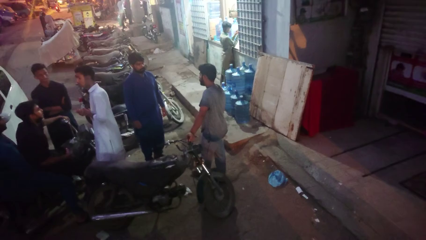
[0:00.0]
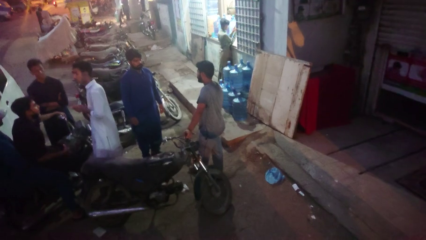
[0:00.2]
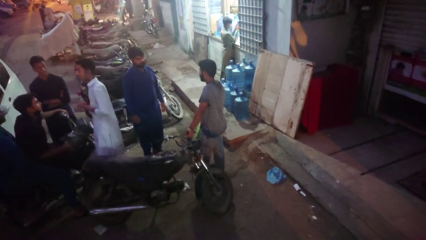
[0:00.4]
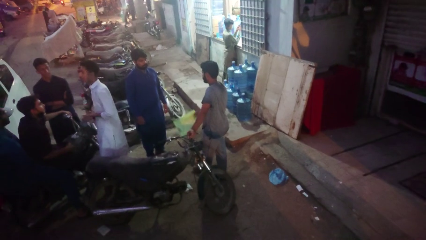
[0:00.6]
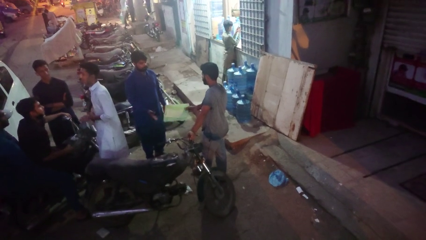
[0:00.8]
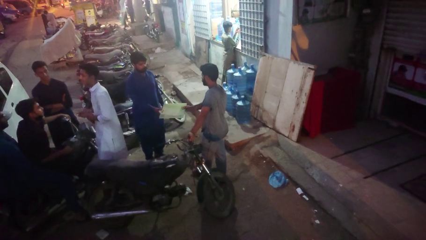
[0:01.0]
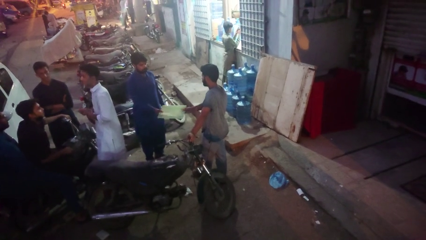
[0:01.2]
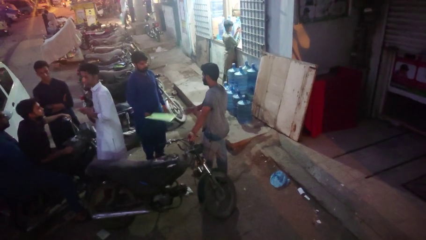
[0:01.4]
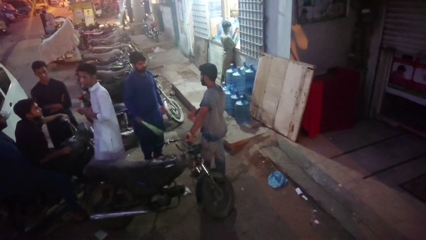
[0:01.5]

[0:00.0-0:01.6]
person transfers object to person

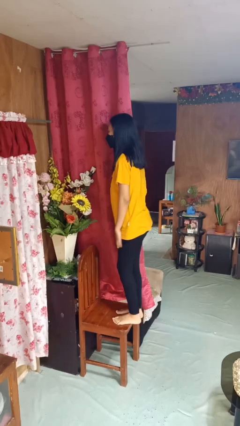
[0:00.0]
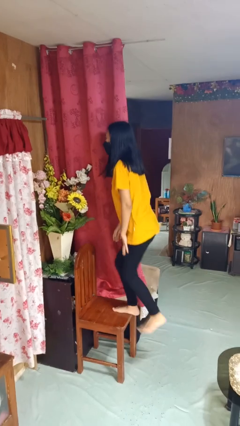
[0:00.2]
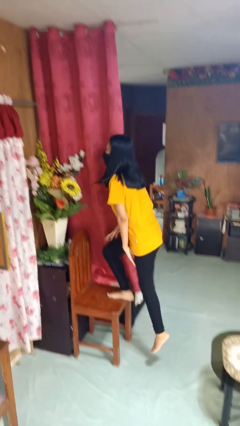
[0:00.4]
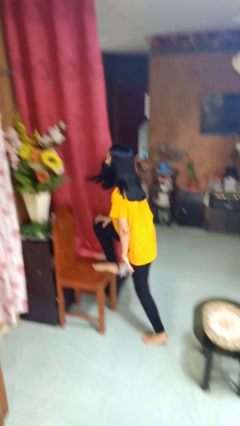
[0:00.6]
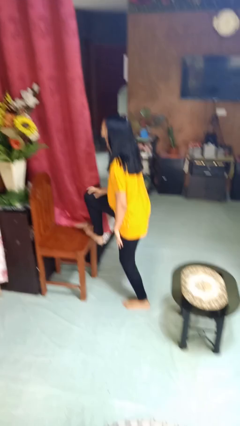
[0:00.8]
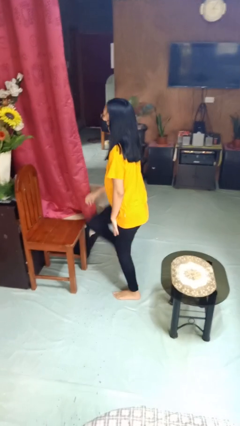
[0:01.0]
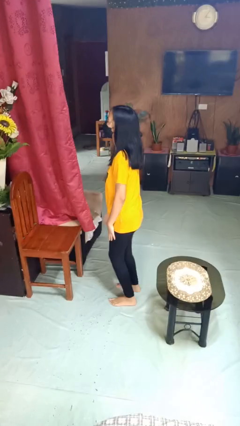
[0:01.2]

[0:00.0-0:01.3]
person climbs off chair

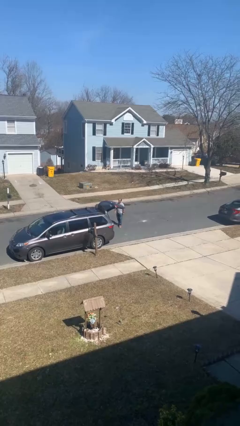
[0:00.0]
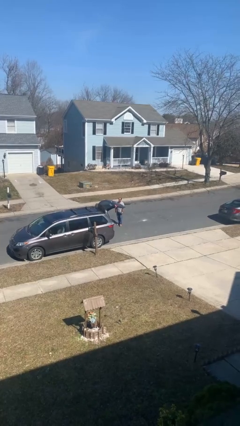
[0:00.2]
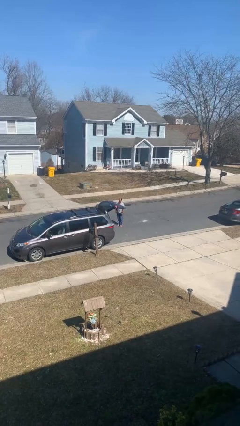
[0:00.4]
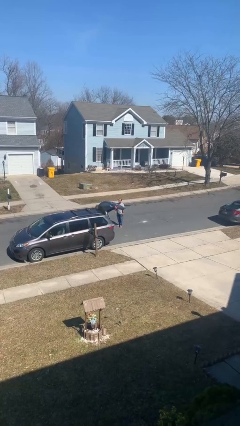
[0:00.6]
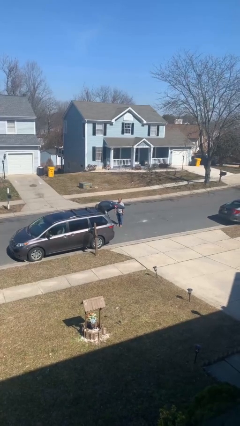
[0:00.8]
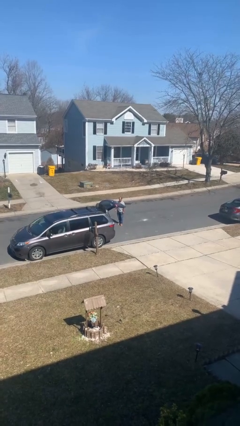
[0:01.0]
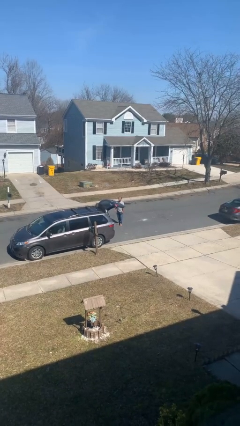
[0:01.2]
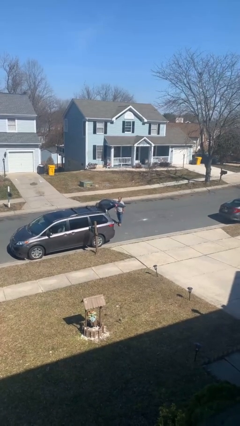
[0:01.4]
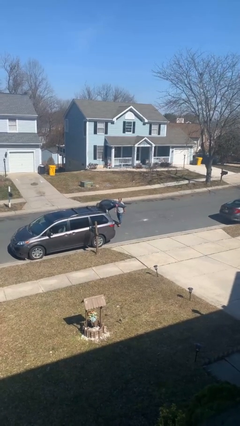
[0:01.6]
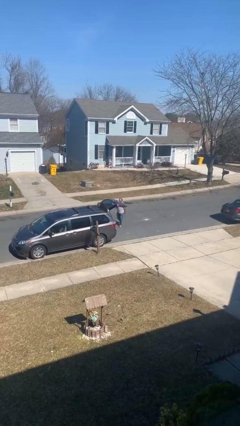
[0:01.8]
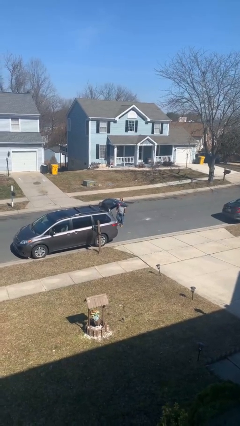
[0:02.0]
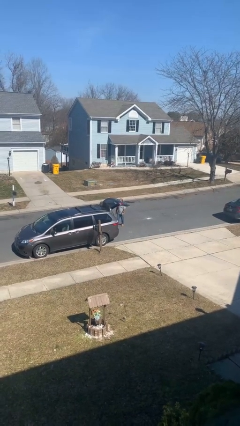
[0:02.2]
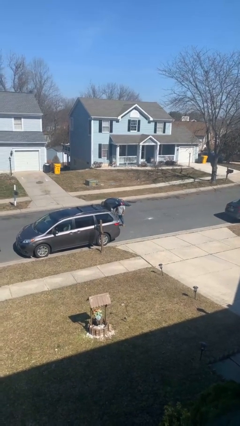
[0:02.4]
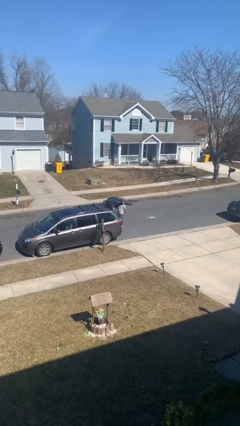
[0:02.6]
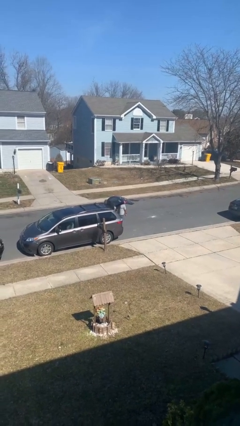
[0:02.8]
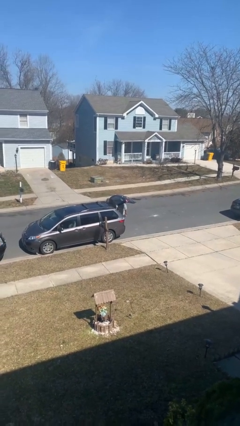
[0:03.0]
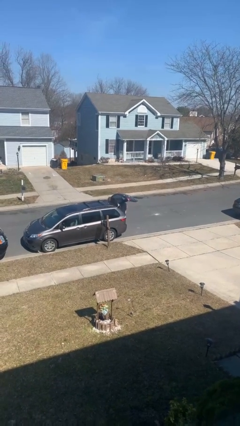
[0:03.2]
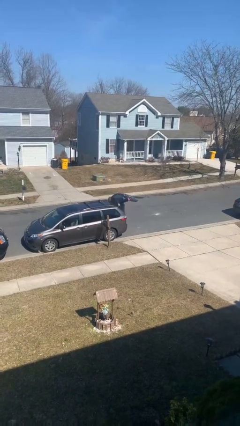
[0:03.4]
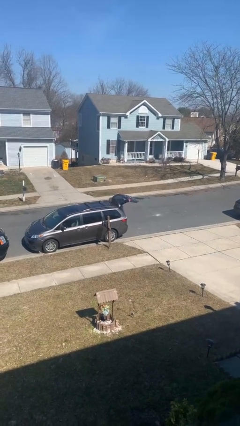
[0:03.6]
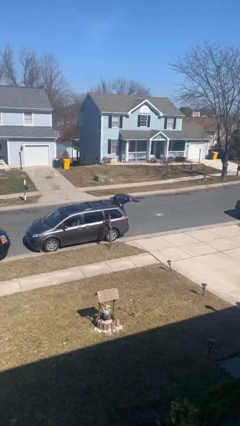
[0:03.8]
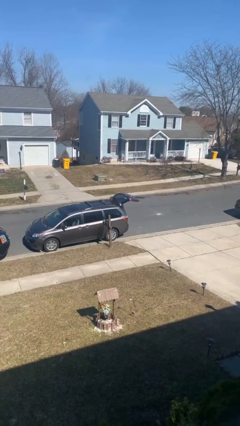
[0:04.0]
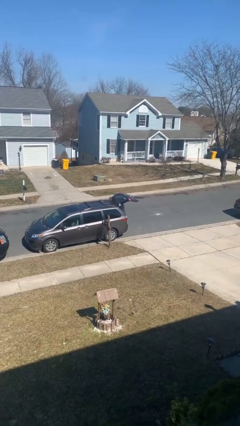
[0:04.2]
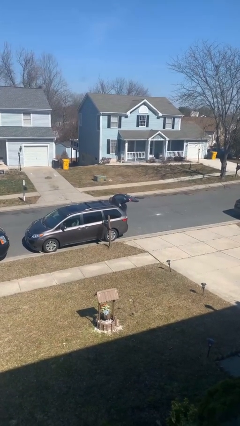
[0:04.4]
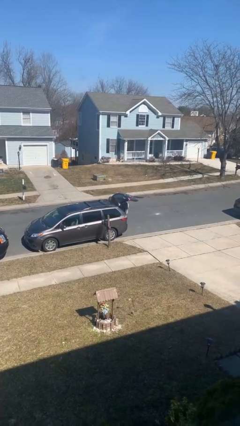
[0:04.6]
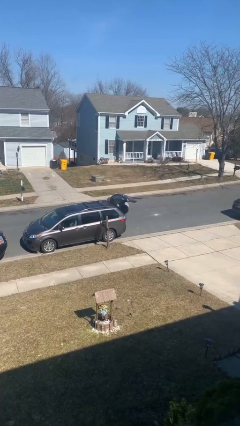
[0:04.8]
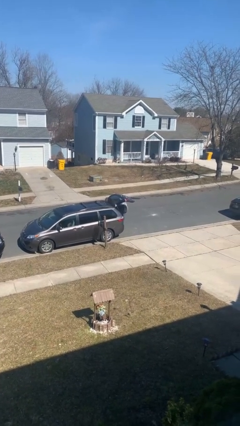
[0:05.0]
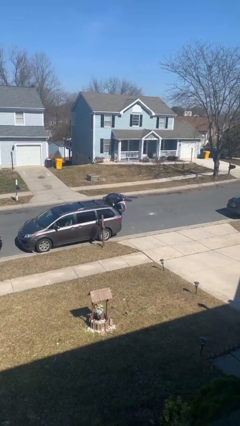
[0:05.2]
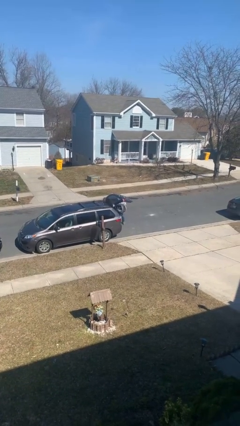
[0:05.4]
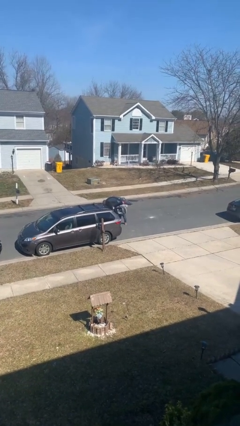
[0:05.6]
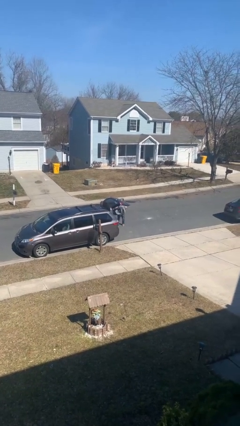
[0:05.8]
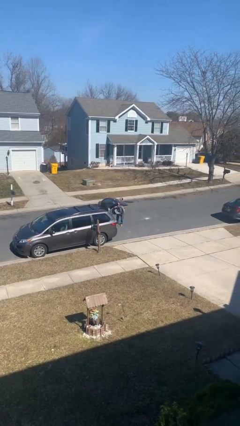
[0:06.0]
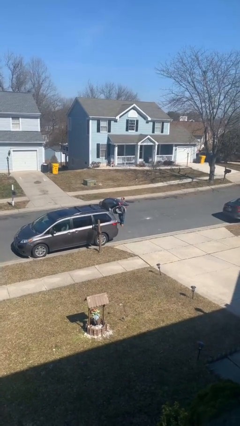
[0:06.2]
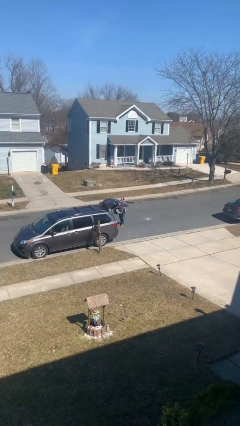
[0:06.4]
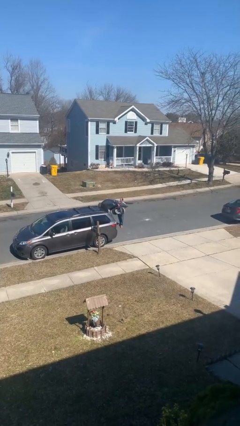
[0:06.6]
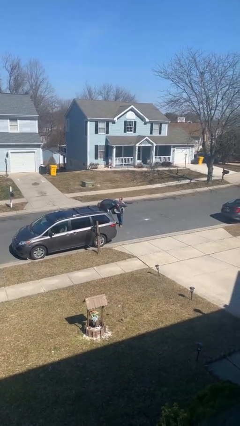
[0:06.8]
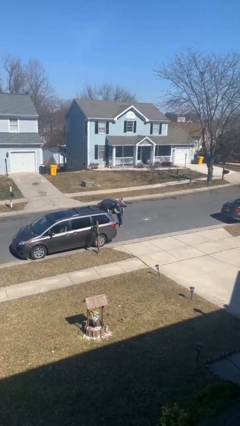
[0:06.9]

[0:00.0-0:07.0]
person unloads car

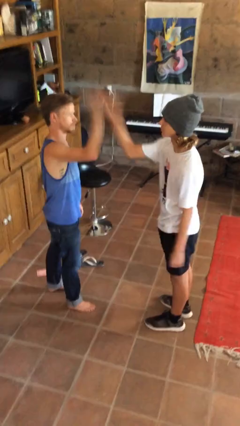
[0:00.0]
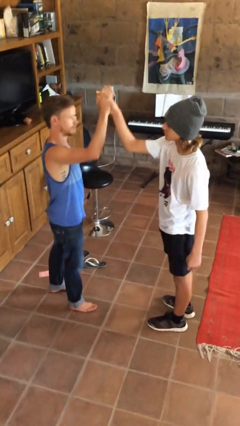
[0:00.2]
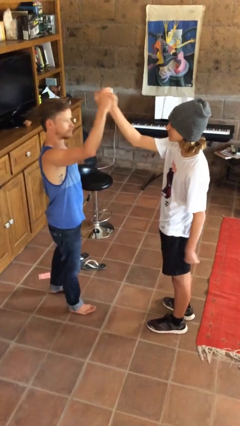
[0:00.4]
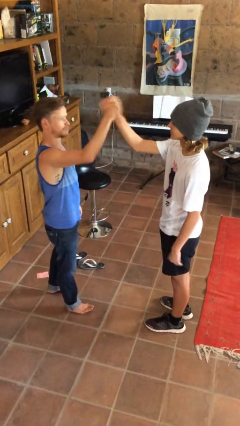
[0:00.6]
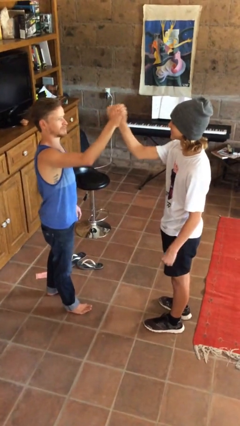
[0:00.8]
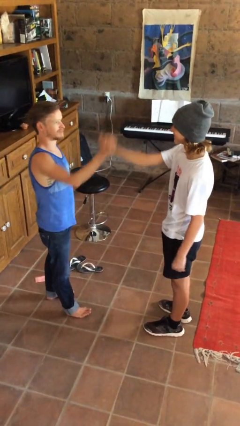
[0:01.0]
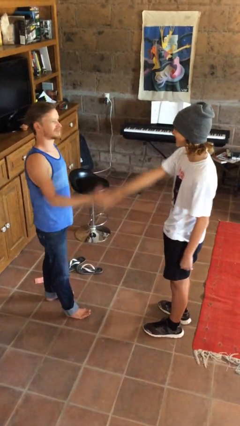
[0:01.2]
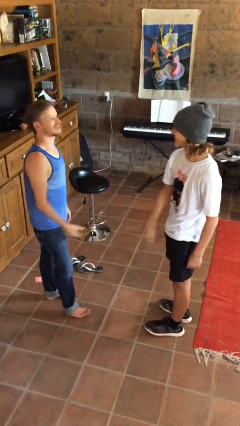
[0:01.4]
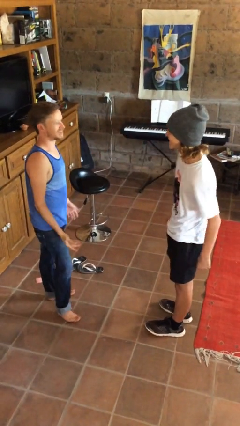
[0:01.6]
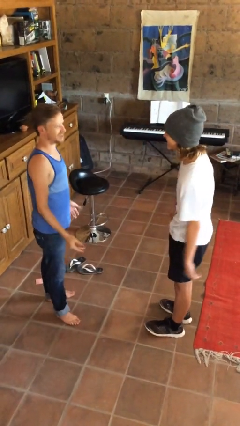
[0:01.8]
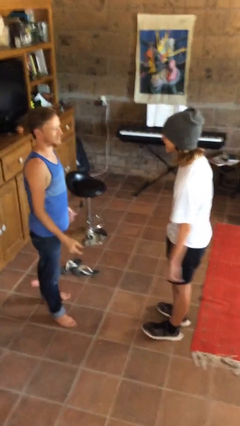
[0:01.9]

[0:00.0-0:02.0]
person highfives hand

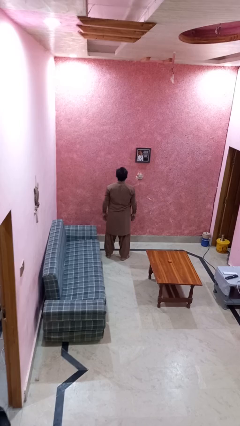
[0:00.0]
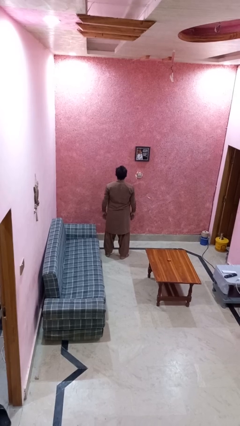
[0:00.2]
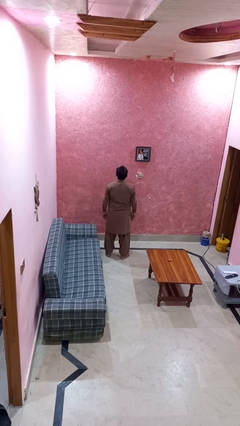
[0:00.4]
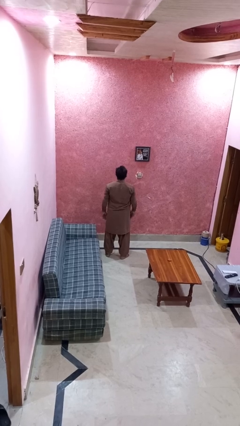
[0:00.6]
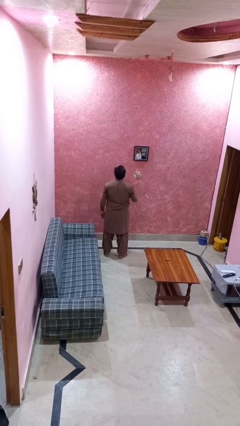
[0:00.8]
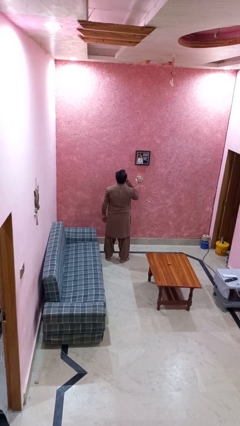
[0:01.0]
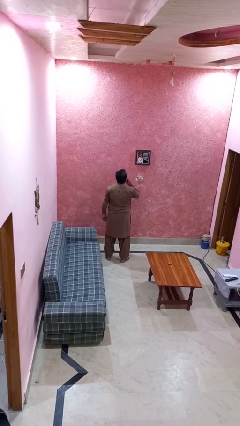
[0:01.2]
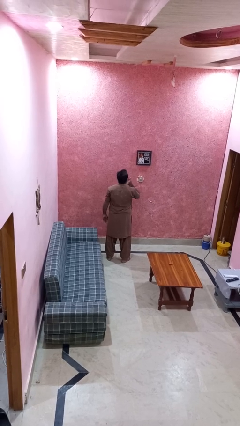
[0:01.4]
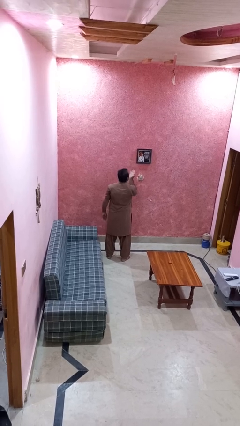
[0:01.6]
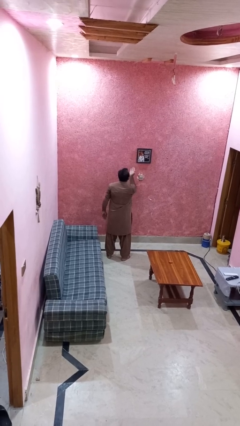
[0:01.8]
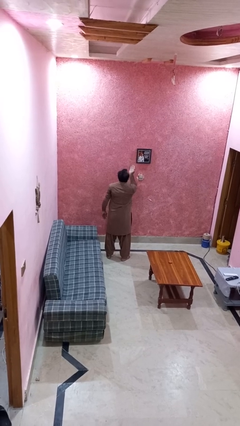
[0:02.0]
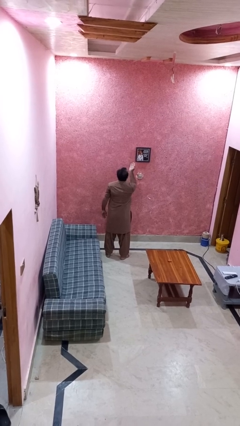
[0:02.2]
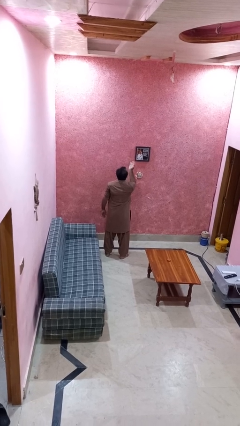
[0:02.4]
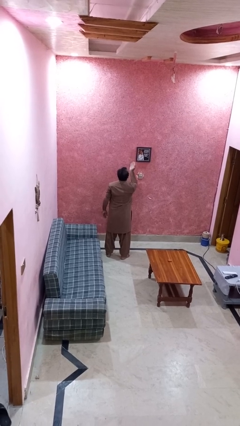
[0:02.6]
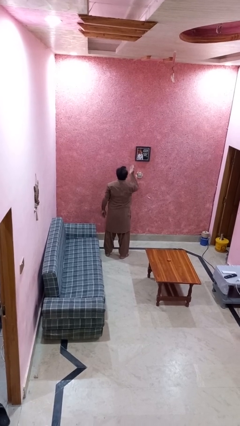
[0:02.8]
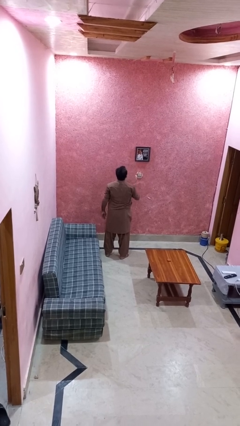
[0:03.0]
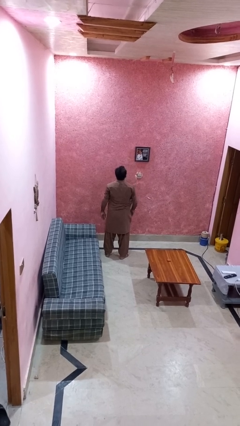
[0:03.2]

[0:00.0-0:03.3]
person gestures blow kiss

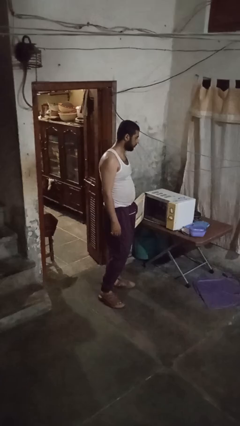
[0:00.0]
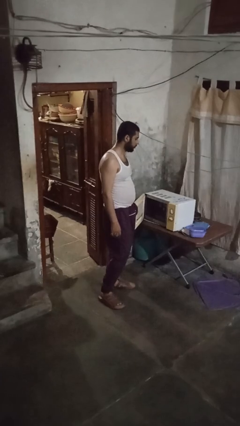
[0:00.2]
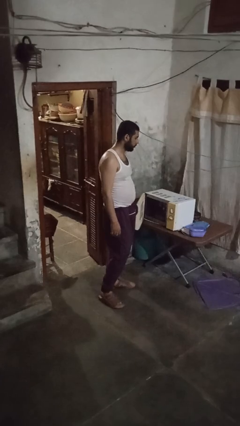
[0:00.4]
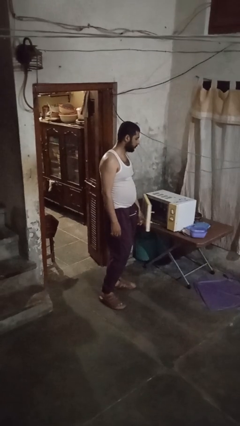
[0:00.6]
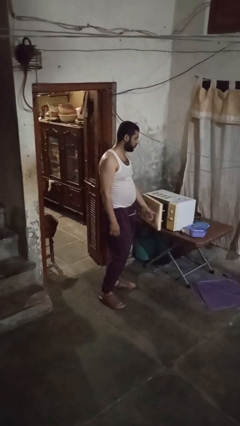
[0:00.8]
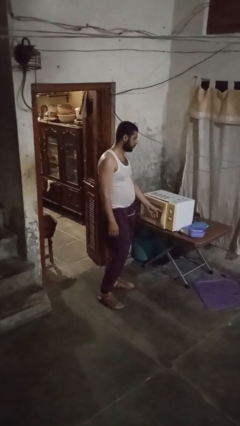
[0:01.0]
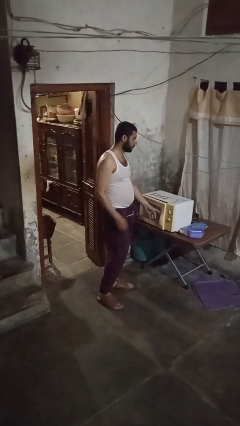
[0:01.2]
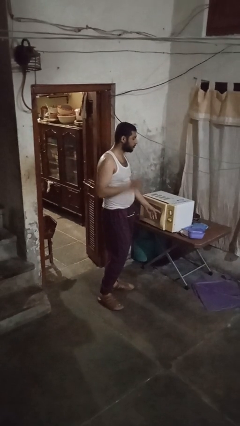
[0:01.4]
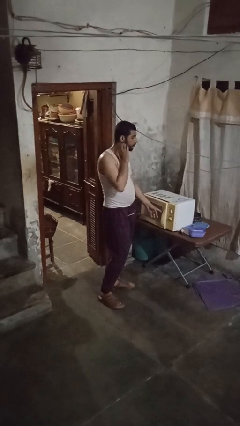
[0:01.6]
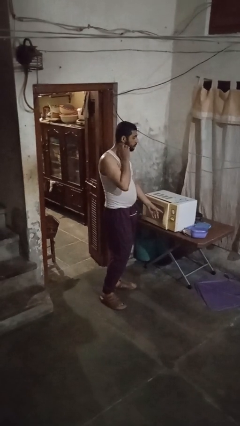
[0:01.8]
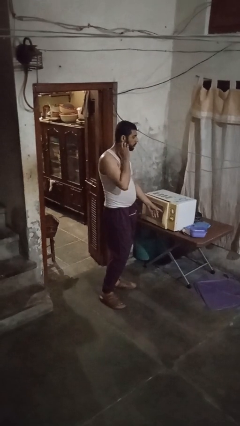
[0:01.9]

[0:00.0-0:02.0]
person closes microwave

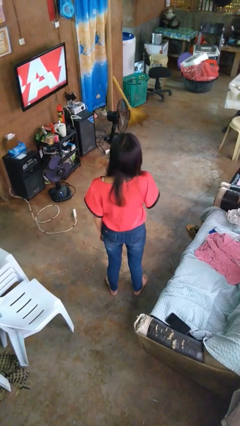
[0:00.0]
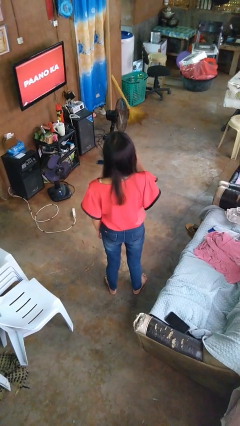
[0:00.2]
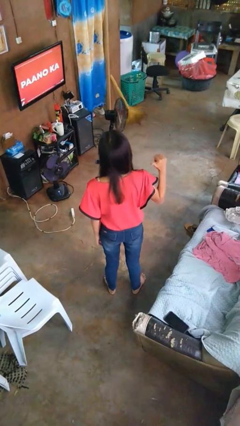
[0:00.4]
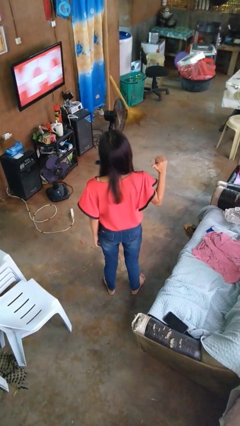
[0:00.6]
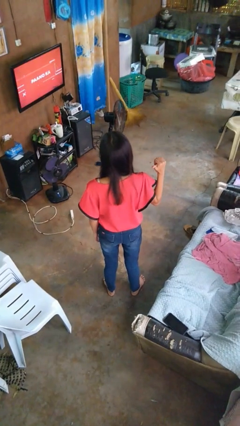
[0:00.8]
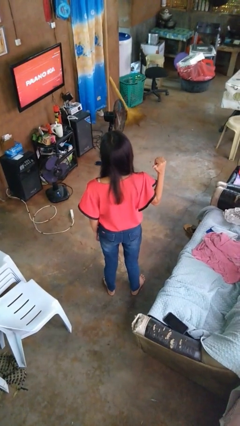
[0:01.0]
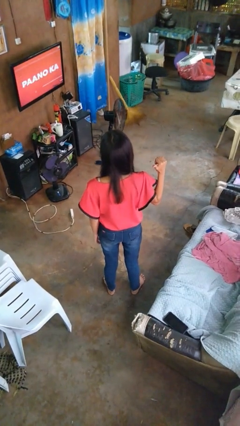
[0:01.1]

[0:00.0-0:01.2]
person gestures cut
